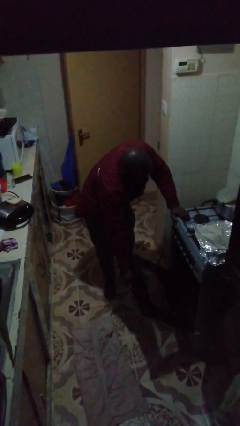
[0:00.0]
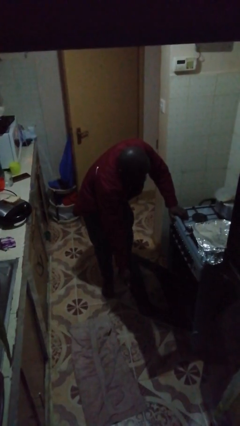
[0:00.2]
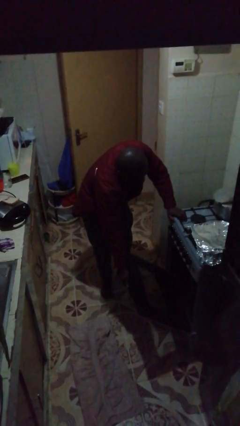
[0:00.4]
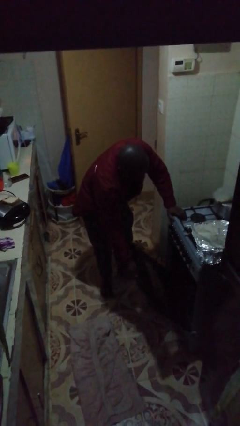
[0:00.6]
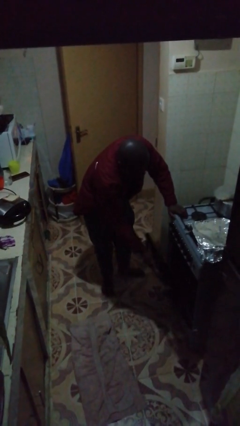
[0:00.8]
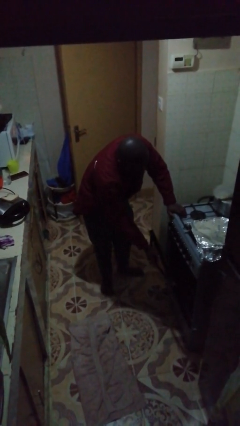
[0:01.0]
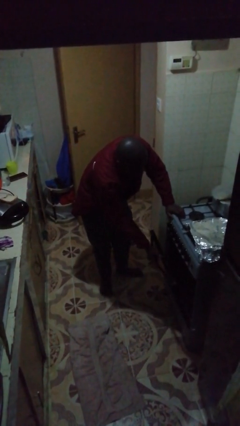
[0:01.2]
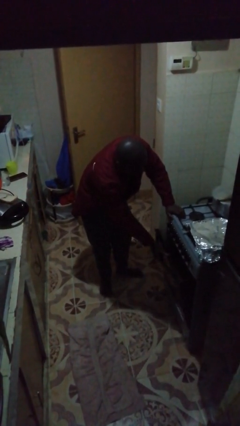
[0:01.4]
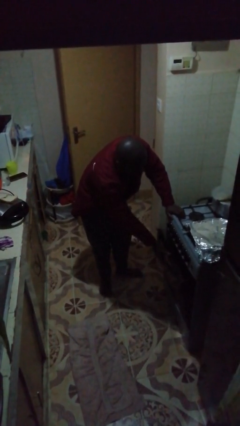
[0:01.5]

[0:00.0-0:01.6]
person closes oven door

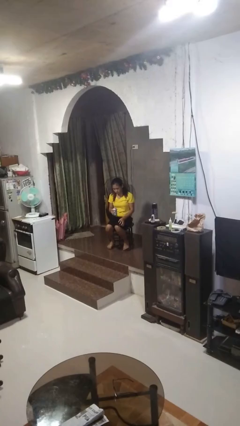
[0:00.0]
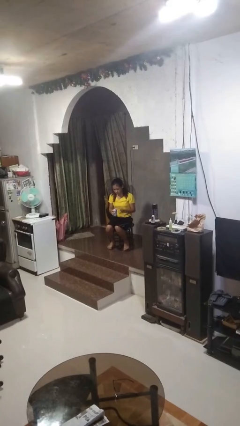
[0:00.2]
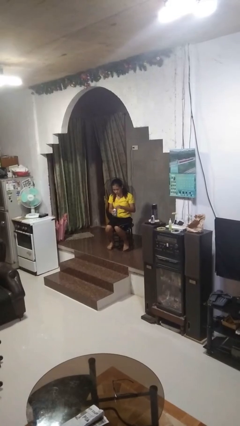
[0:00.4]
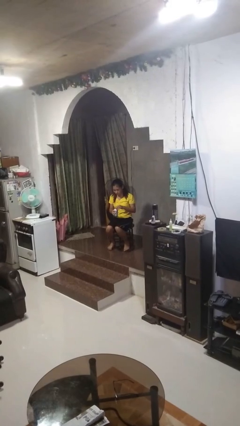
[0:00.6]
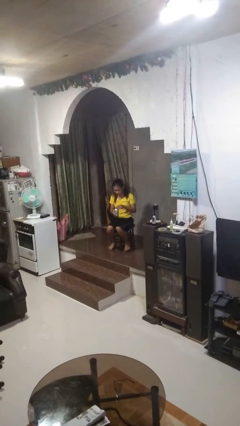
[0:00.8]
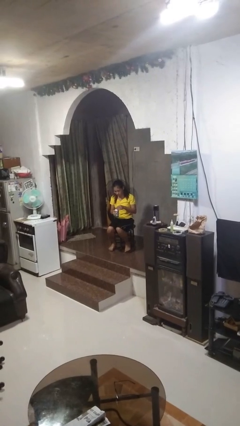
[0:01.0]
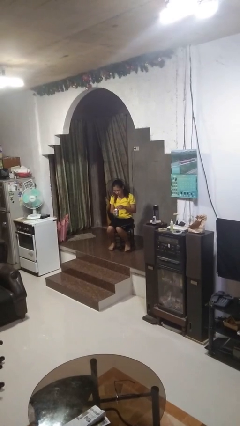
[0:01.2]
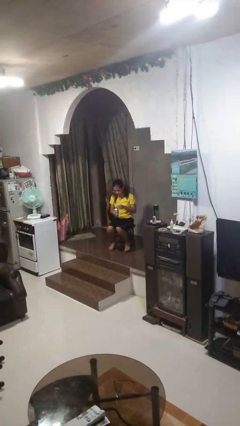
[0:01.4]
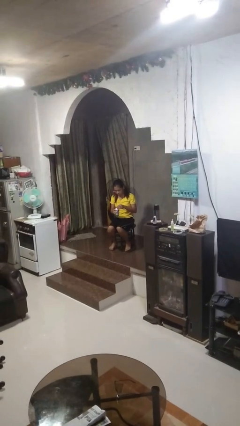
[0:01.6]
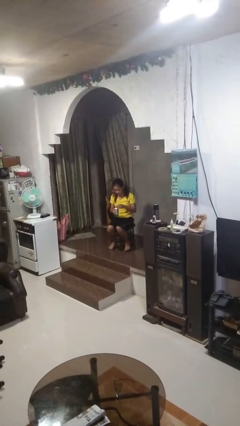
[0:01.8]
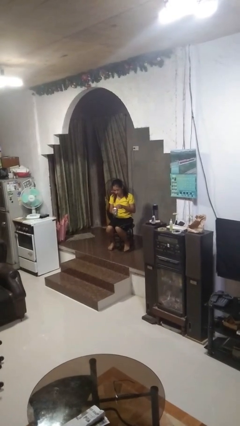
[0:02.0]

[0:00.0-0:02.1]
person opens beverage can

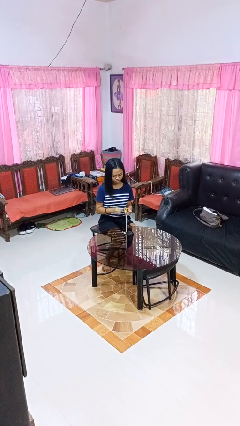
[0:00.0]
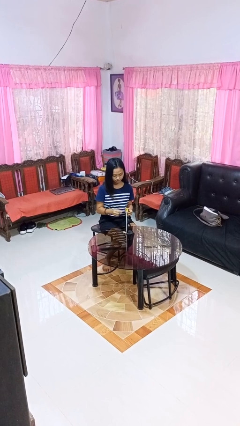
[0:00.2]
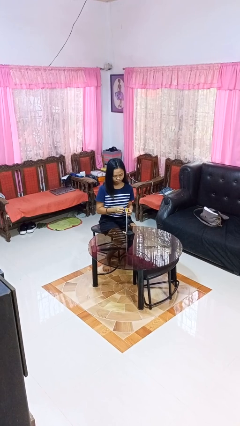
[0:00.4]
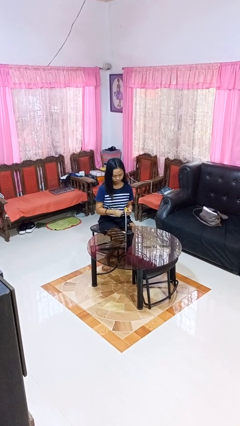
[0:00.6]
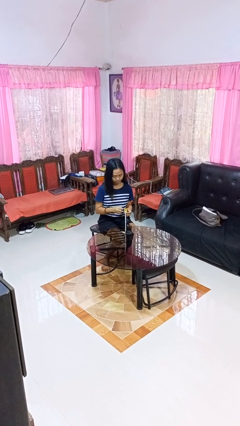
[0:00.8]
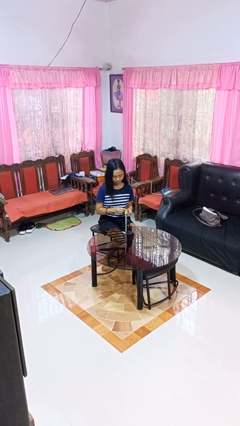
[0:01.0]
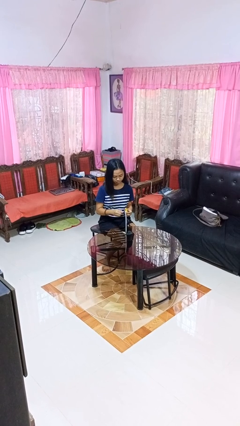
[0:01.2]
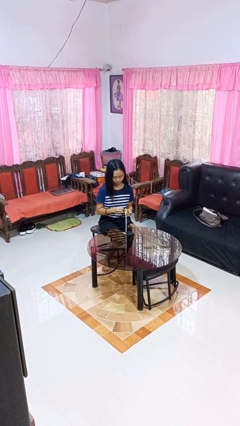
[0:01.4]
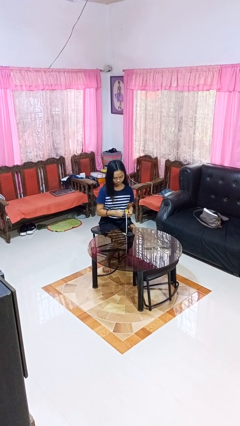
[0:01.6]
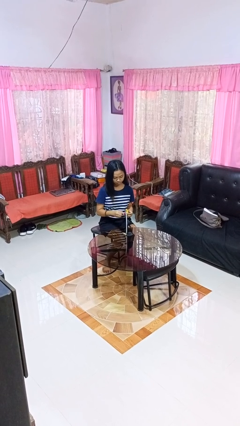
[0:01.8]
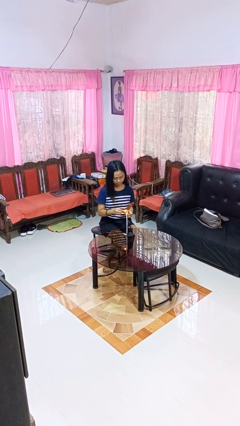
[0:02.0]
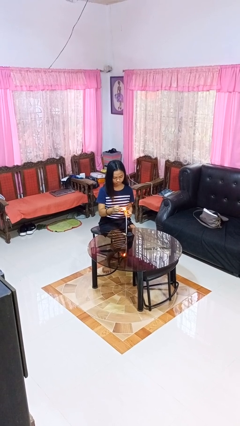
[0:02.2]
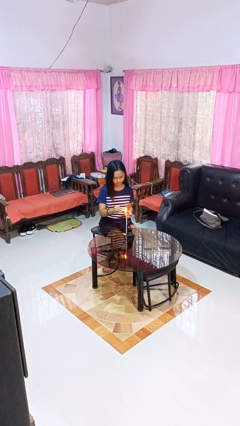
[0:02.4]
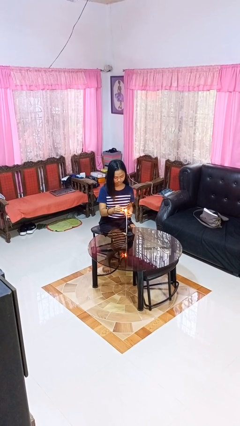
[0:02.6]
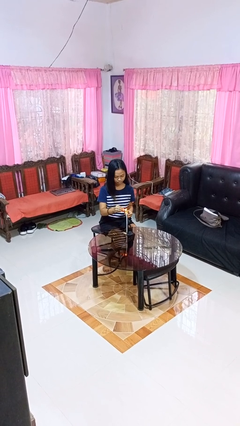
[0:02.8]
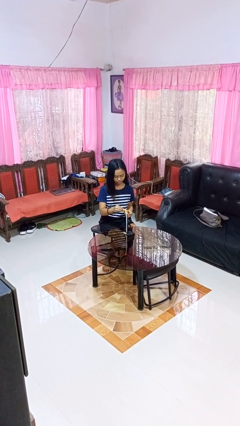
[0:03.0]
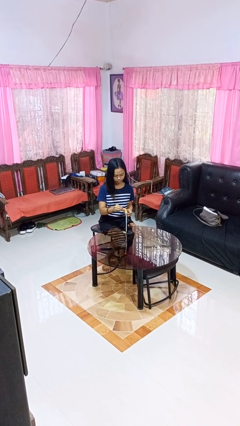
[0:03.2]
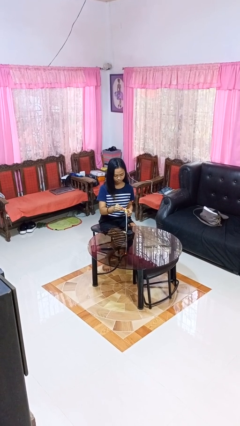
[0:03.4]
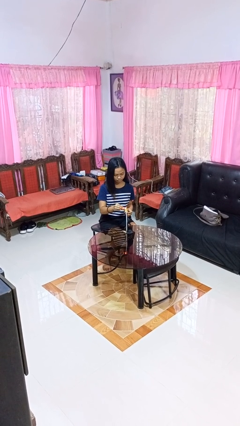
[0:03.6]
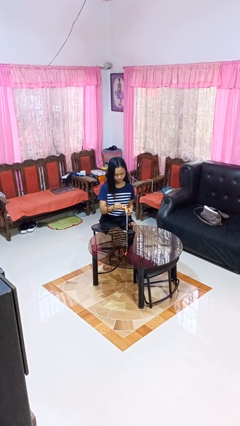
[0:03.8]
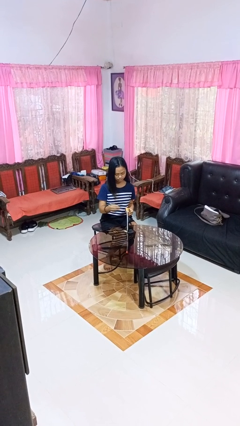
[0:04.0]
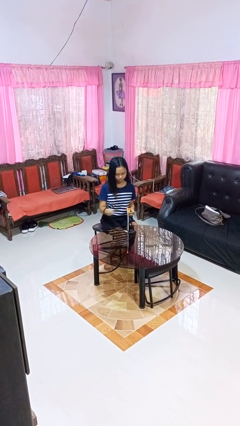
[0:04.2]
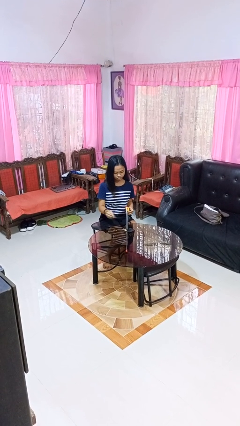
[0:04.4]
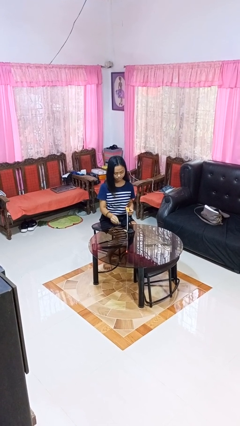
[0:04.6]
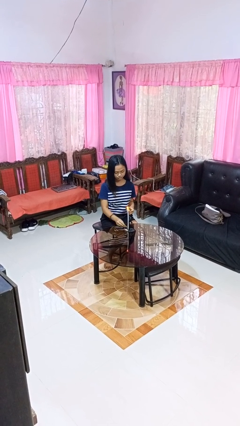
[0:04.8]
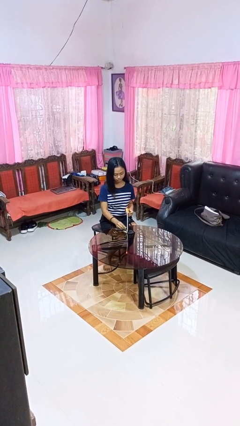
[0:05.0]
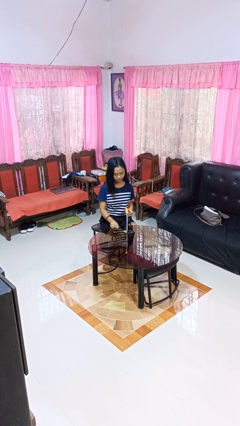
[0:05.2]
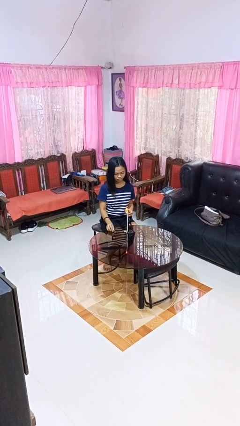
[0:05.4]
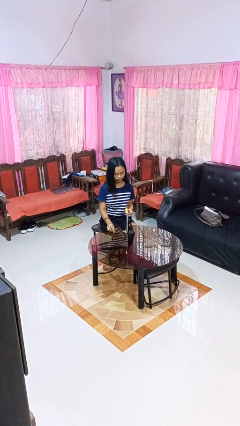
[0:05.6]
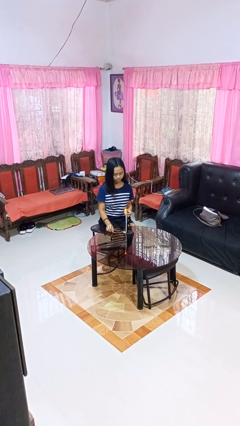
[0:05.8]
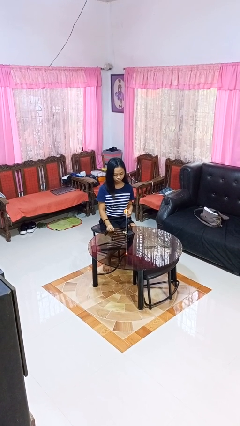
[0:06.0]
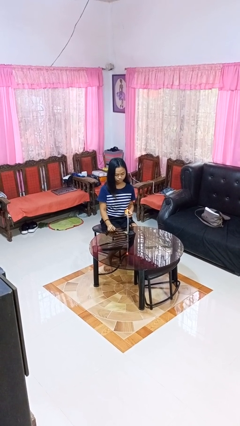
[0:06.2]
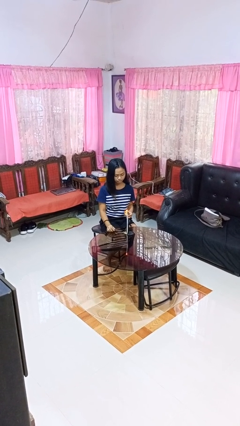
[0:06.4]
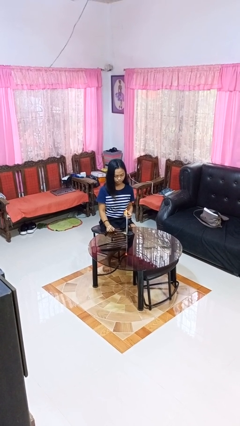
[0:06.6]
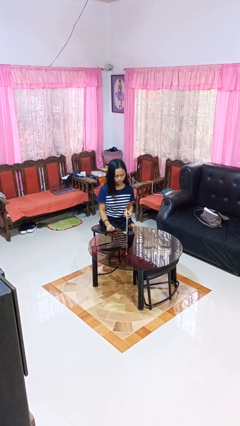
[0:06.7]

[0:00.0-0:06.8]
person lights candle

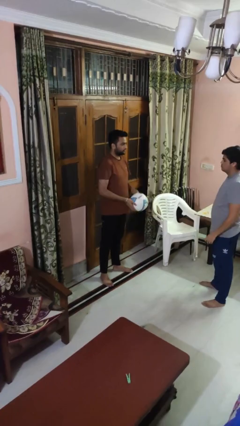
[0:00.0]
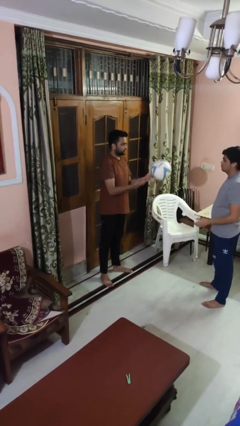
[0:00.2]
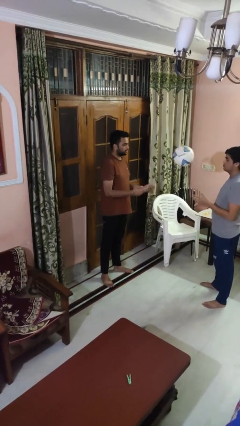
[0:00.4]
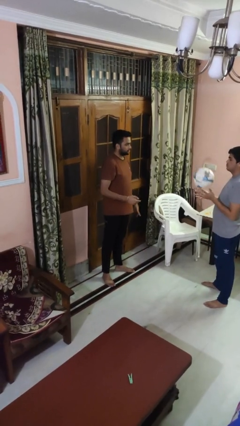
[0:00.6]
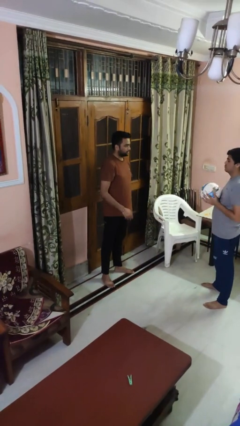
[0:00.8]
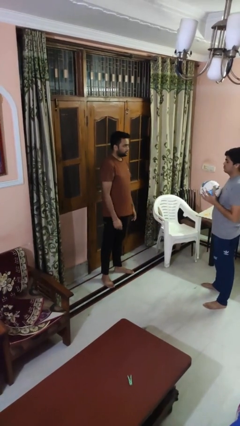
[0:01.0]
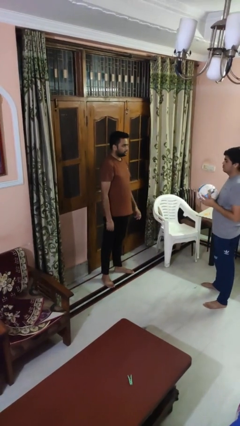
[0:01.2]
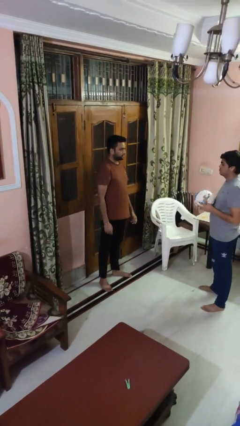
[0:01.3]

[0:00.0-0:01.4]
person throws object to person

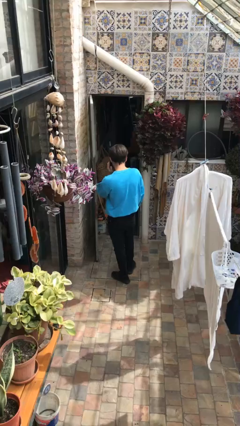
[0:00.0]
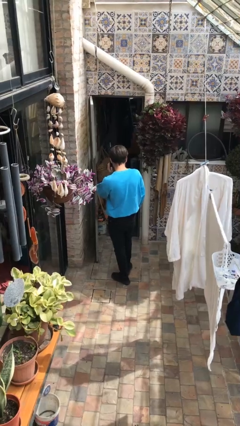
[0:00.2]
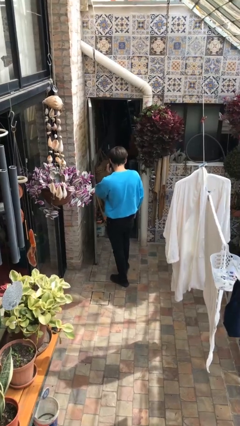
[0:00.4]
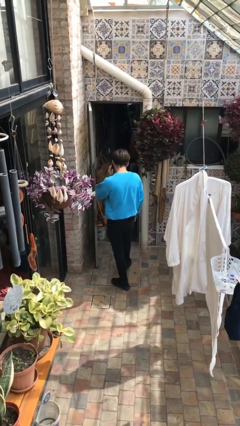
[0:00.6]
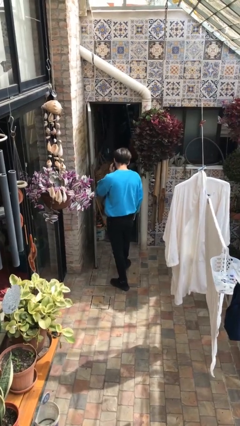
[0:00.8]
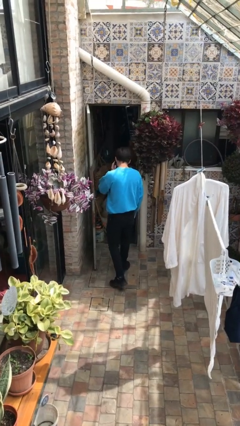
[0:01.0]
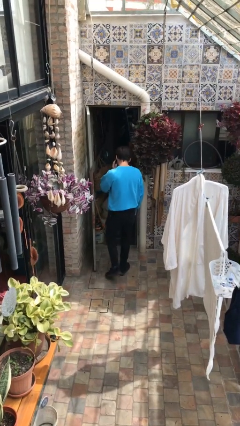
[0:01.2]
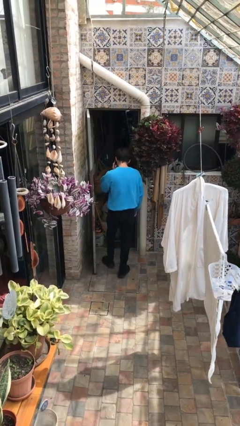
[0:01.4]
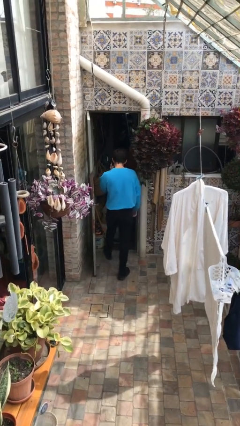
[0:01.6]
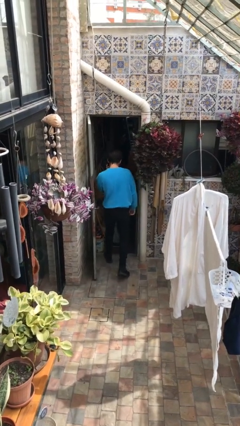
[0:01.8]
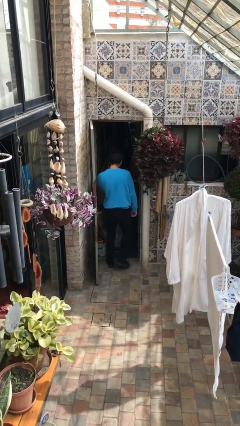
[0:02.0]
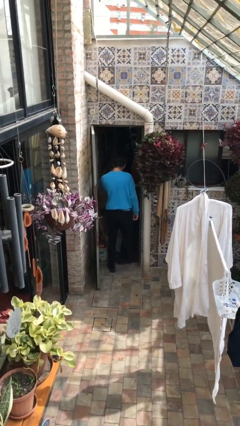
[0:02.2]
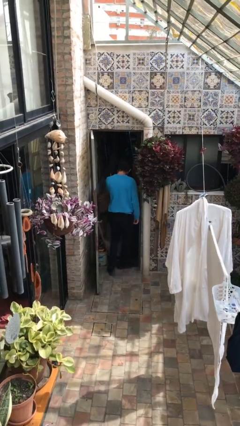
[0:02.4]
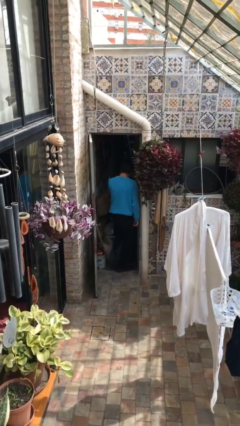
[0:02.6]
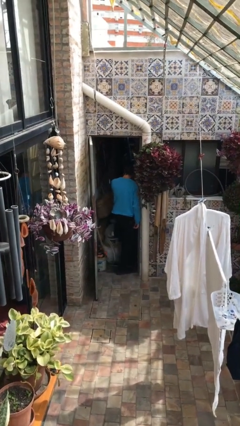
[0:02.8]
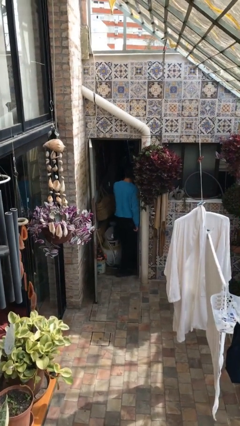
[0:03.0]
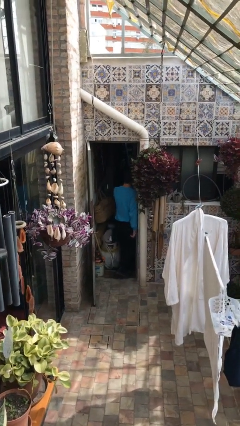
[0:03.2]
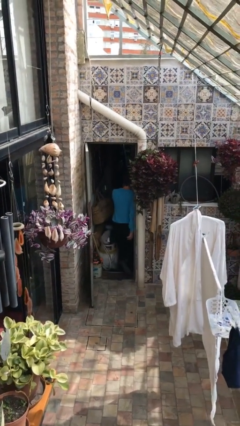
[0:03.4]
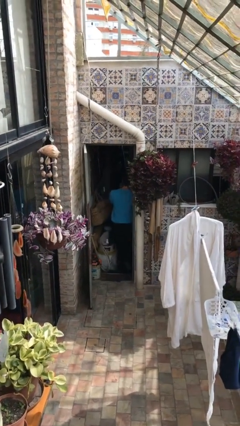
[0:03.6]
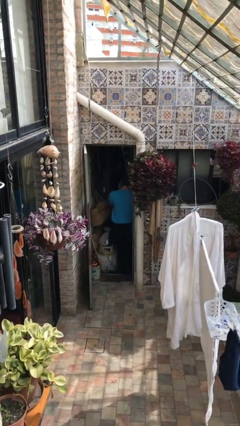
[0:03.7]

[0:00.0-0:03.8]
person exits scene through structure

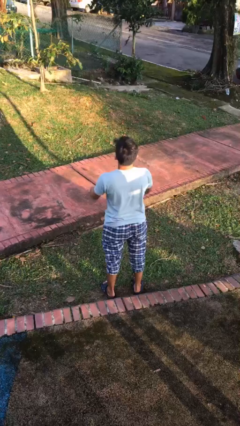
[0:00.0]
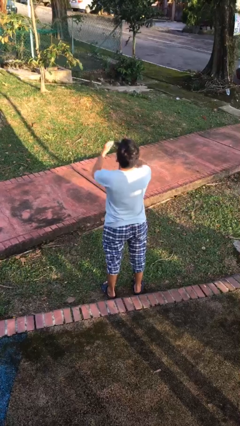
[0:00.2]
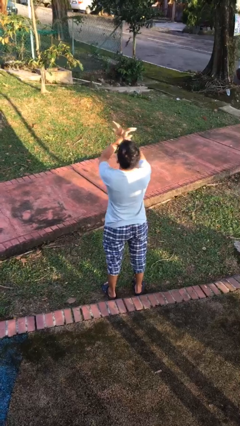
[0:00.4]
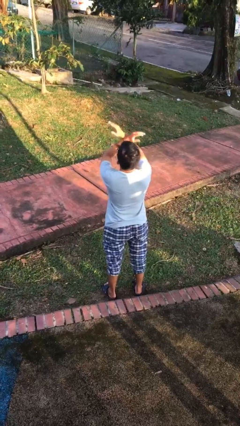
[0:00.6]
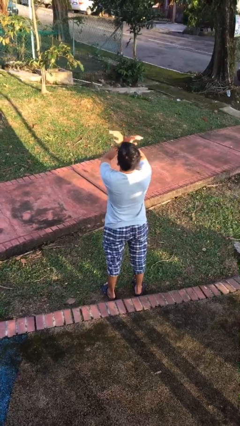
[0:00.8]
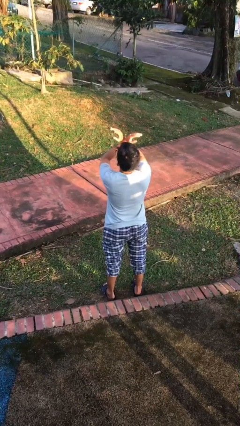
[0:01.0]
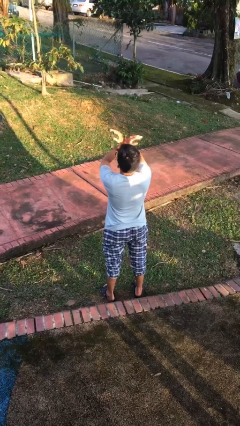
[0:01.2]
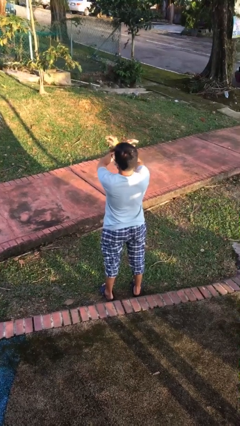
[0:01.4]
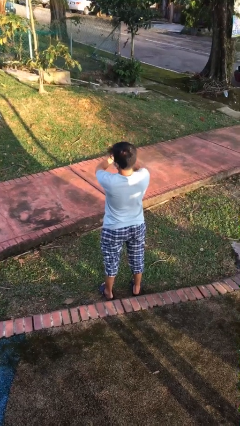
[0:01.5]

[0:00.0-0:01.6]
person gestures arms x

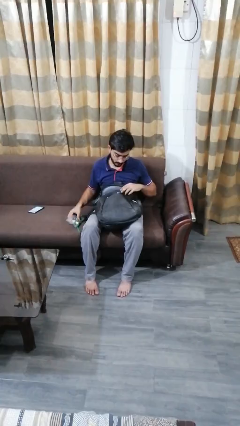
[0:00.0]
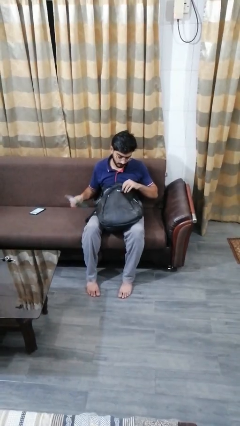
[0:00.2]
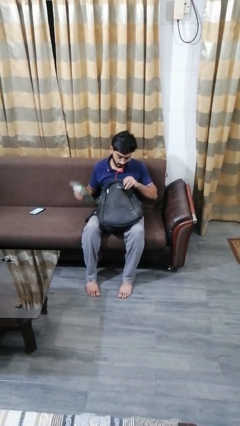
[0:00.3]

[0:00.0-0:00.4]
person puts object into backpack
